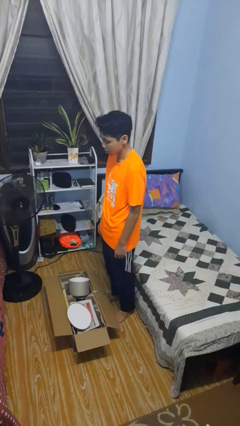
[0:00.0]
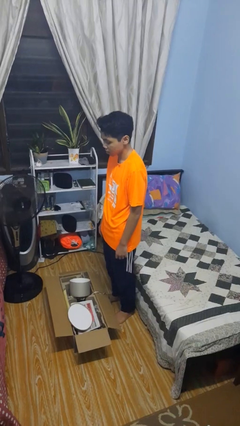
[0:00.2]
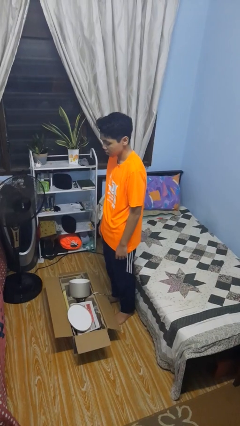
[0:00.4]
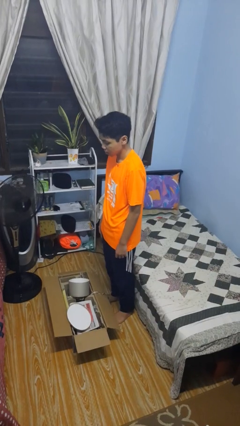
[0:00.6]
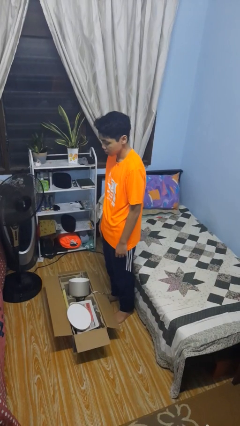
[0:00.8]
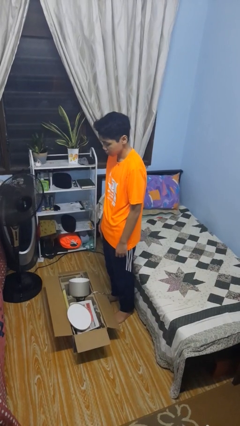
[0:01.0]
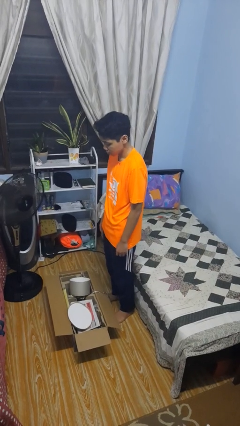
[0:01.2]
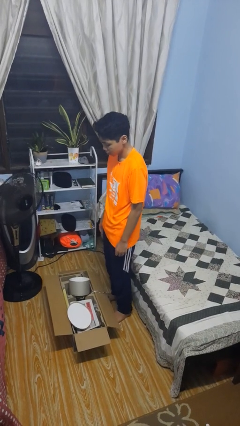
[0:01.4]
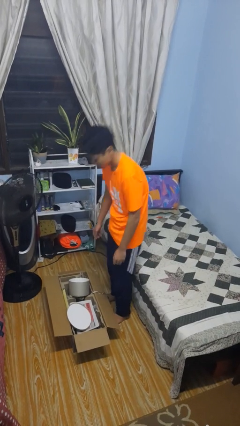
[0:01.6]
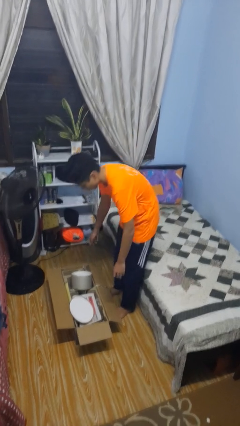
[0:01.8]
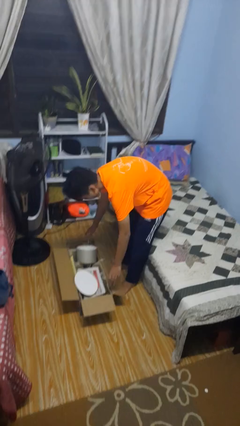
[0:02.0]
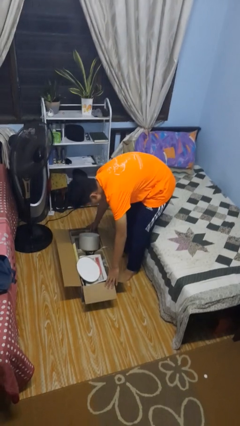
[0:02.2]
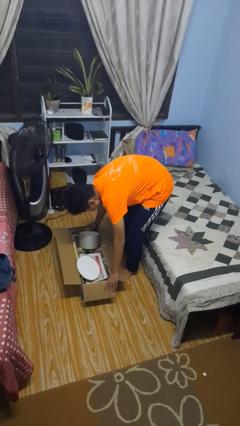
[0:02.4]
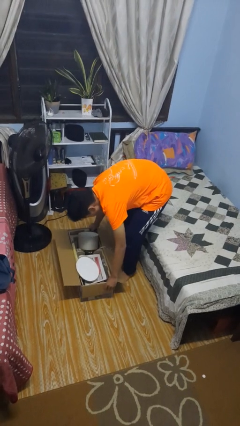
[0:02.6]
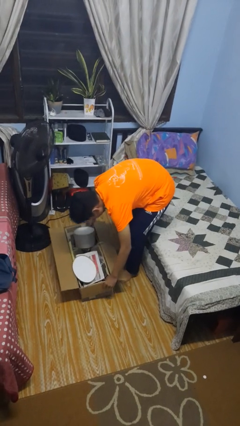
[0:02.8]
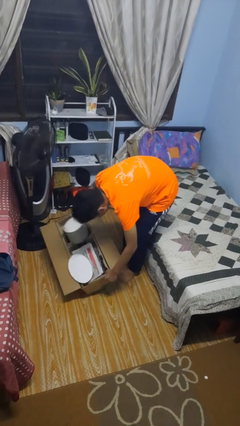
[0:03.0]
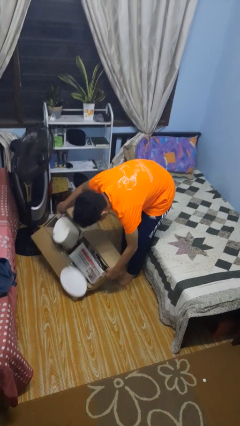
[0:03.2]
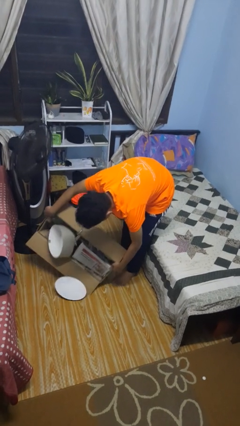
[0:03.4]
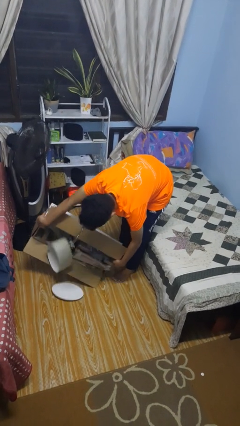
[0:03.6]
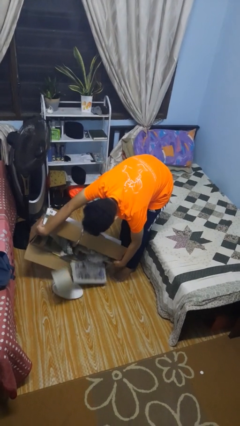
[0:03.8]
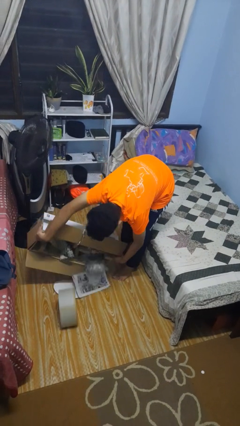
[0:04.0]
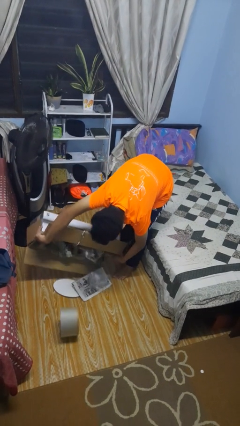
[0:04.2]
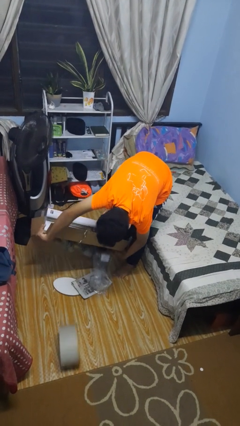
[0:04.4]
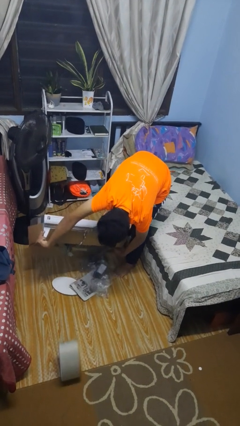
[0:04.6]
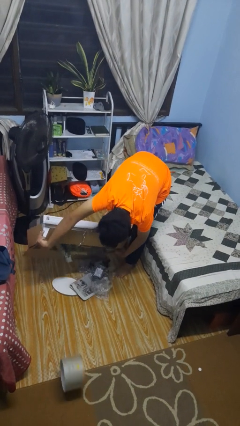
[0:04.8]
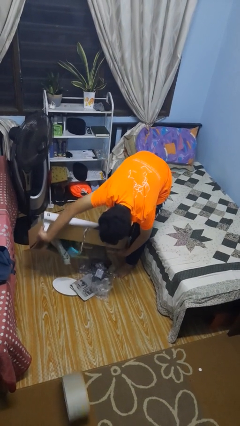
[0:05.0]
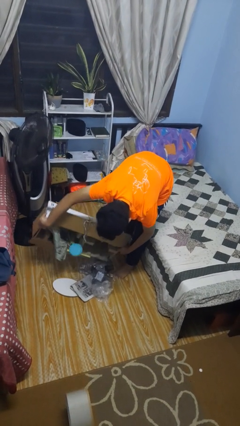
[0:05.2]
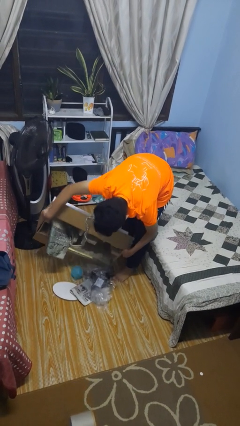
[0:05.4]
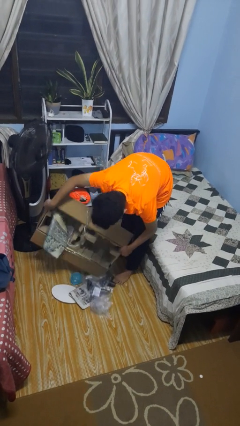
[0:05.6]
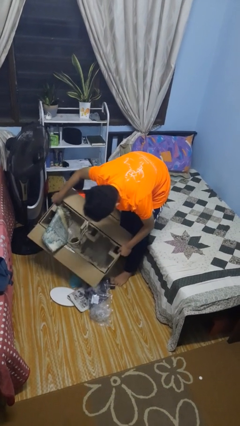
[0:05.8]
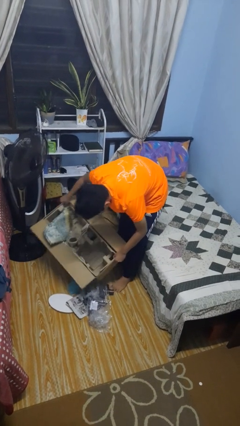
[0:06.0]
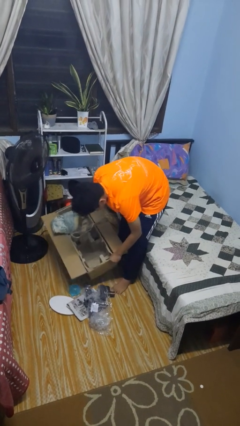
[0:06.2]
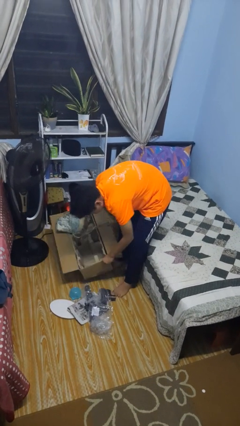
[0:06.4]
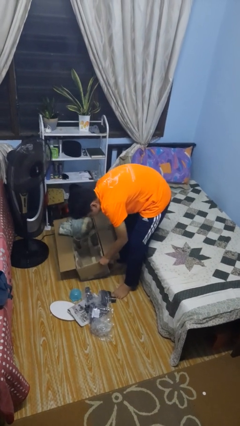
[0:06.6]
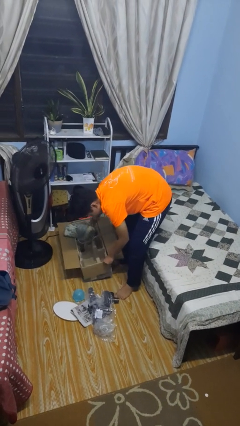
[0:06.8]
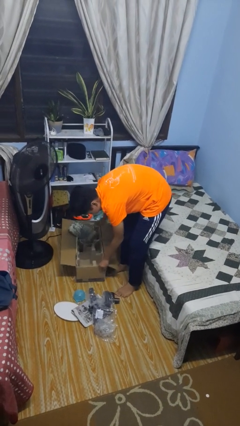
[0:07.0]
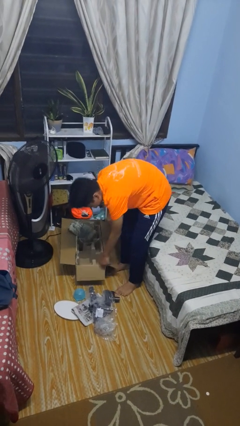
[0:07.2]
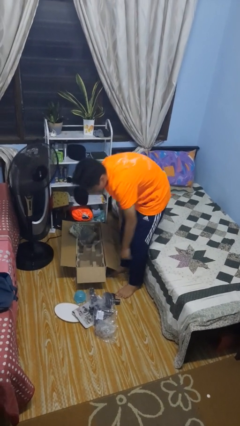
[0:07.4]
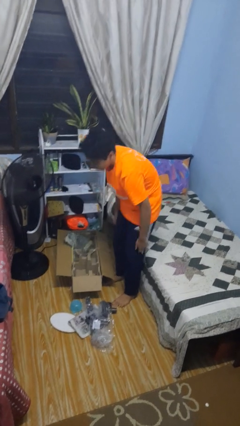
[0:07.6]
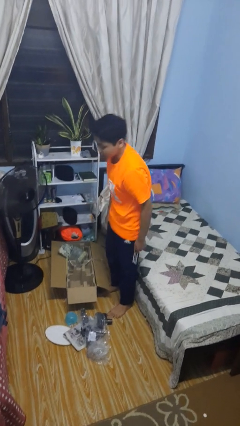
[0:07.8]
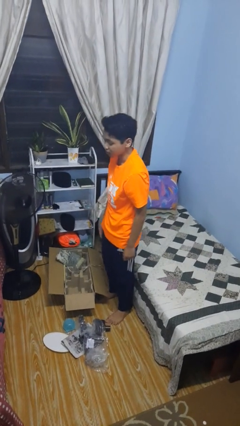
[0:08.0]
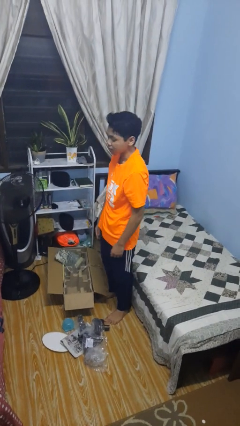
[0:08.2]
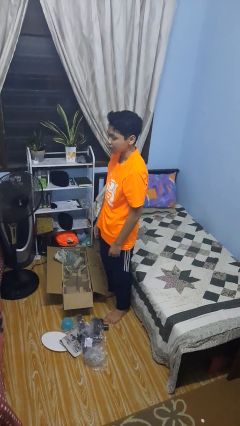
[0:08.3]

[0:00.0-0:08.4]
person unloads box onto floor

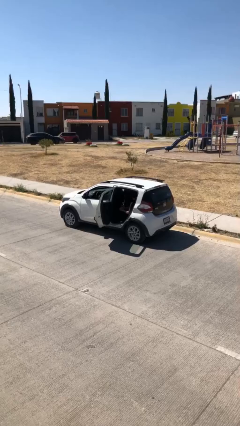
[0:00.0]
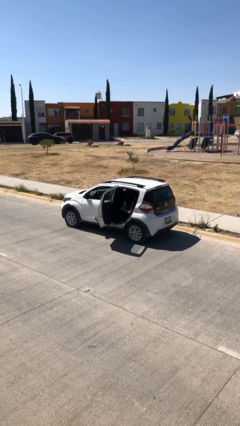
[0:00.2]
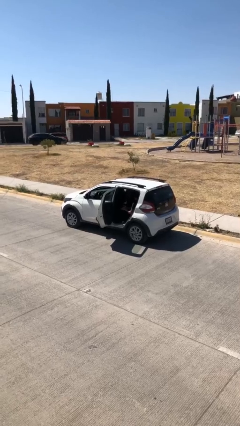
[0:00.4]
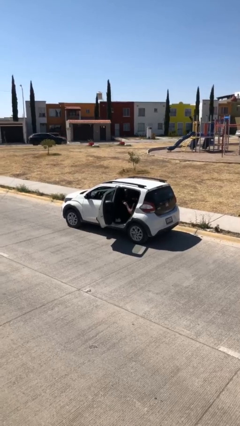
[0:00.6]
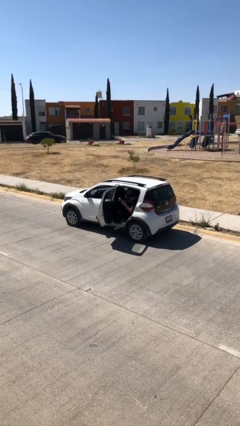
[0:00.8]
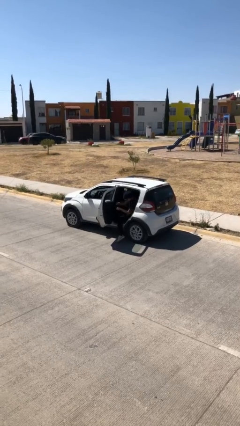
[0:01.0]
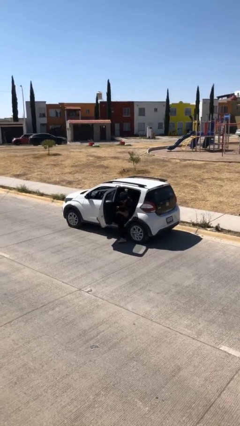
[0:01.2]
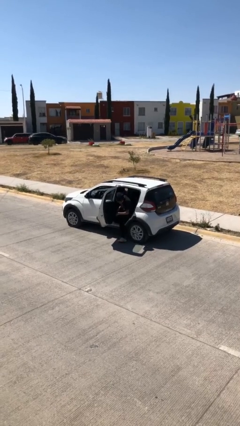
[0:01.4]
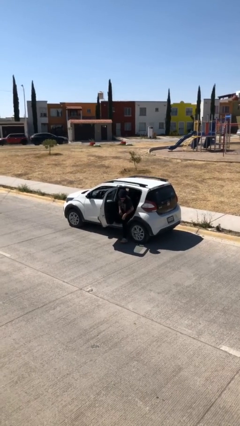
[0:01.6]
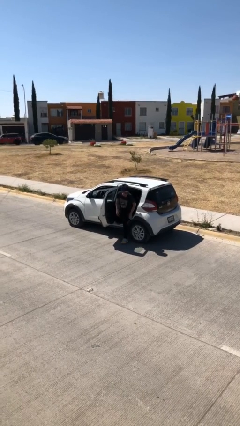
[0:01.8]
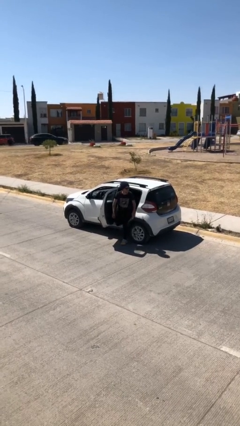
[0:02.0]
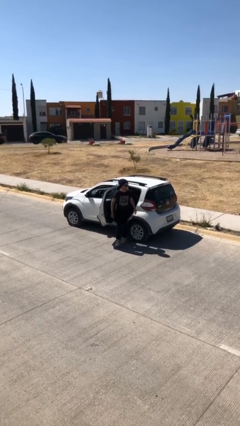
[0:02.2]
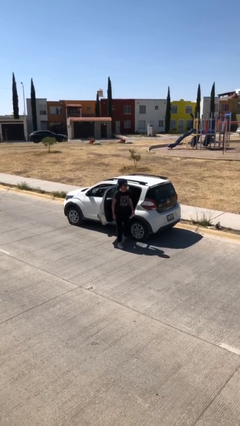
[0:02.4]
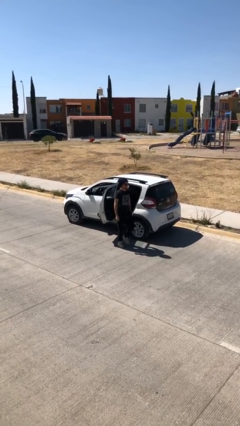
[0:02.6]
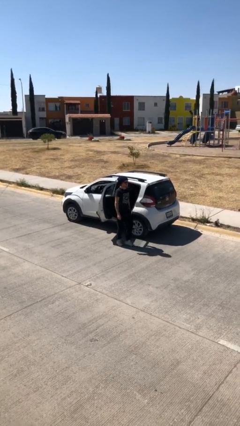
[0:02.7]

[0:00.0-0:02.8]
person exits car

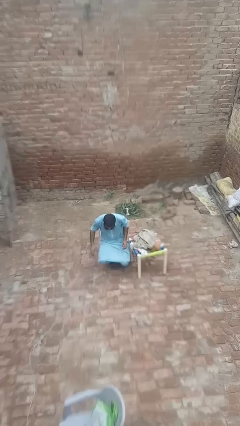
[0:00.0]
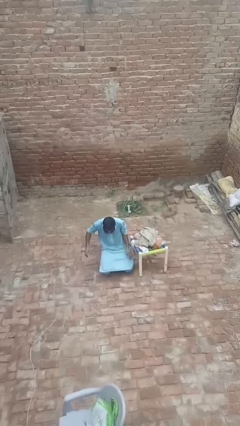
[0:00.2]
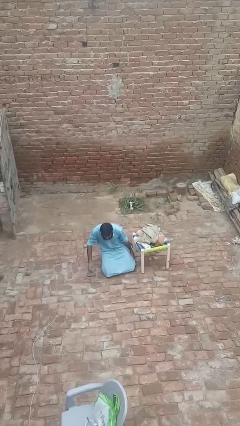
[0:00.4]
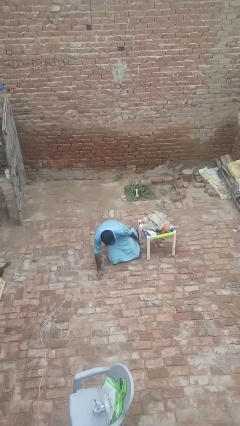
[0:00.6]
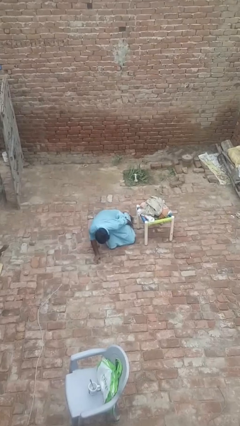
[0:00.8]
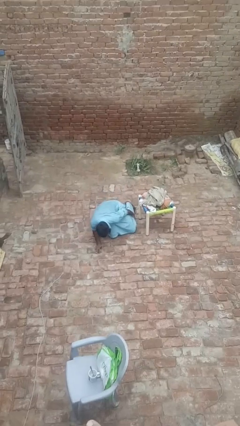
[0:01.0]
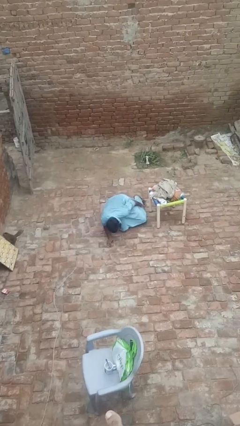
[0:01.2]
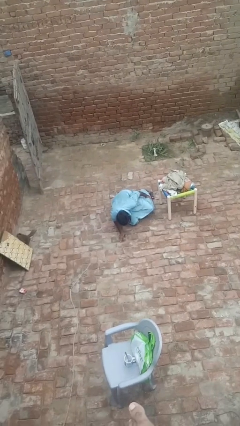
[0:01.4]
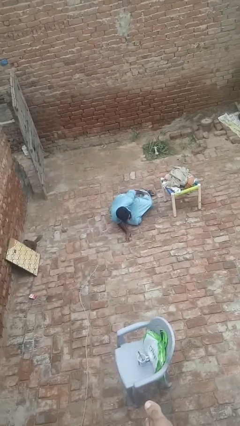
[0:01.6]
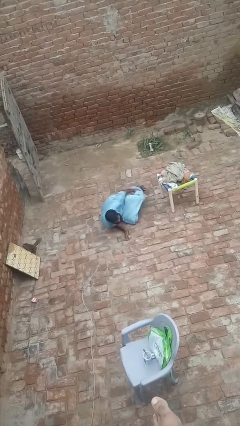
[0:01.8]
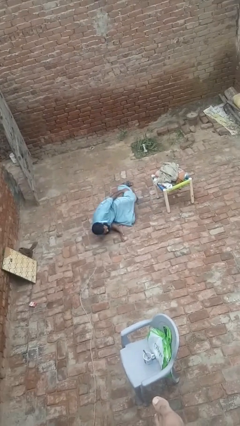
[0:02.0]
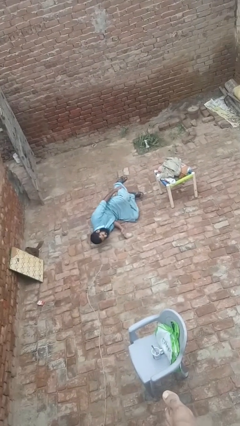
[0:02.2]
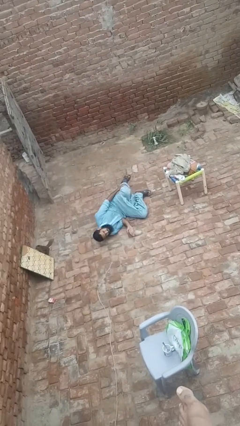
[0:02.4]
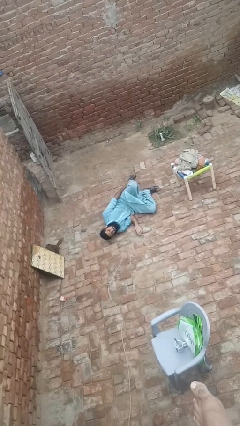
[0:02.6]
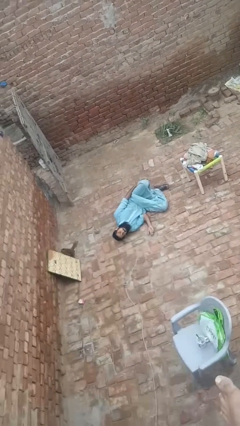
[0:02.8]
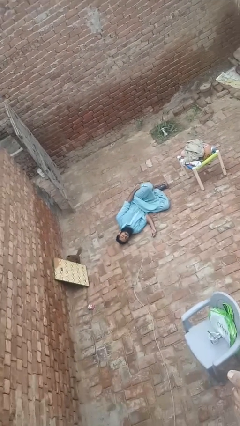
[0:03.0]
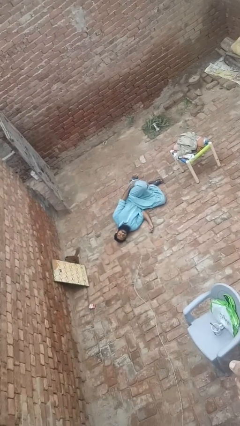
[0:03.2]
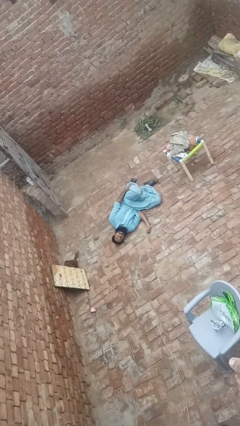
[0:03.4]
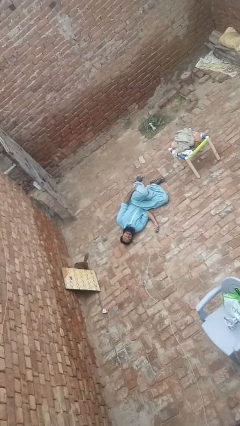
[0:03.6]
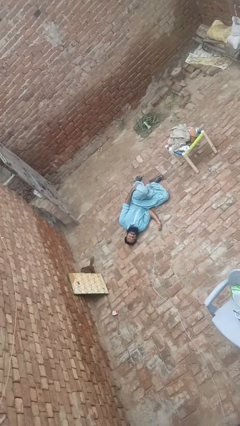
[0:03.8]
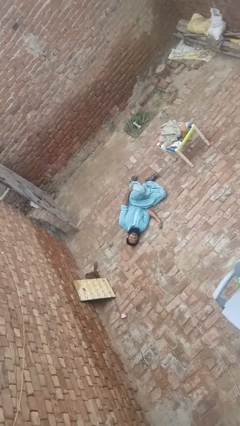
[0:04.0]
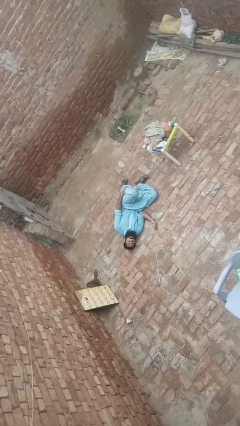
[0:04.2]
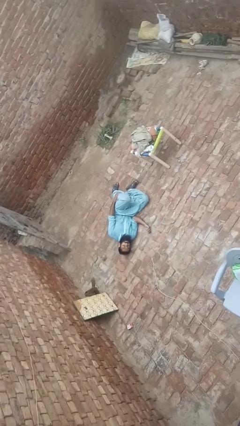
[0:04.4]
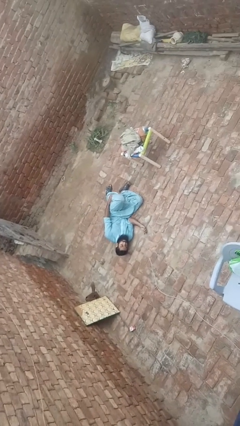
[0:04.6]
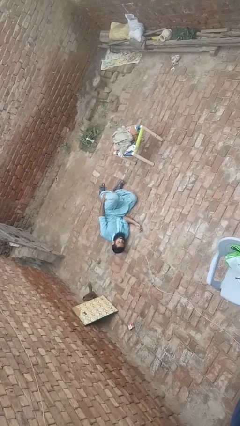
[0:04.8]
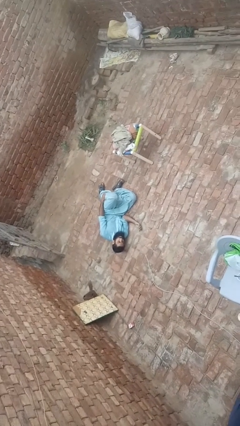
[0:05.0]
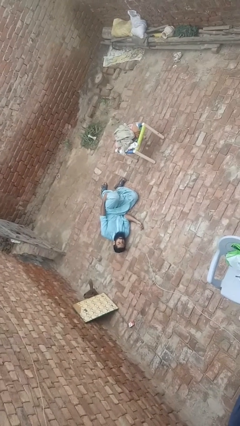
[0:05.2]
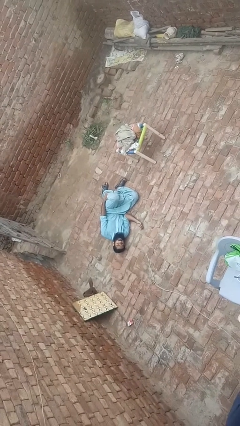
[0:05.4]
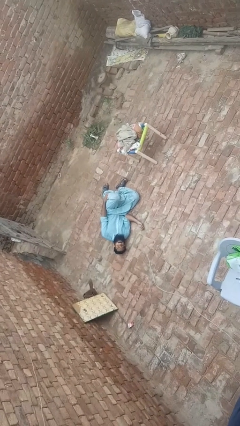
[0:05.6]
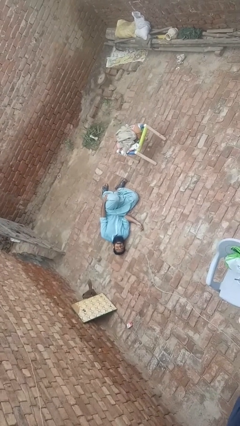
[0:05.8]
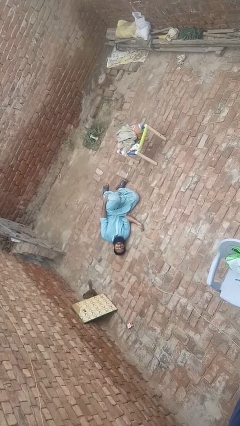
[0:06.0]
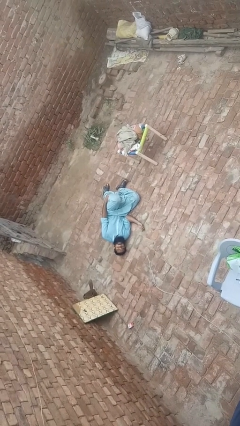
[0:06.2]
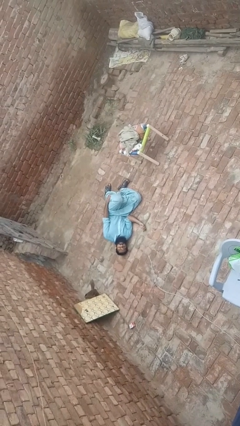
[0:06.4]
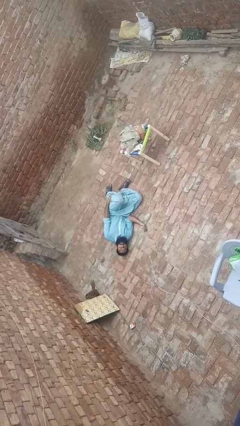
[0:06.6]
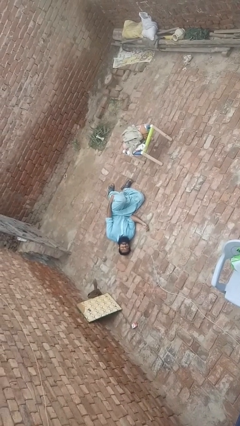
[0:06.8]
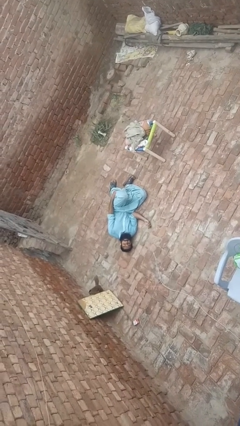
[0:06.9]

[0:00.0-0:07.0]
person lies down on floor
